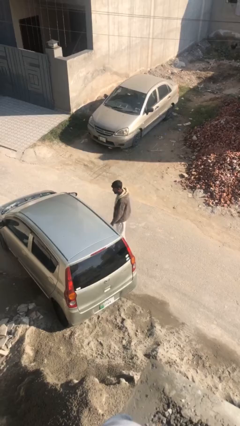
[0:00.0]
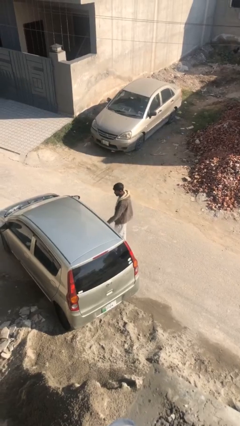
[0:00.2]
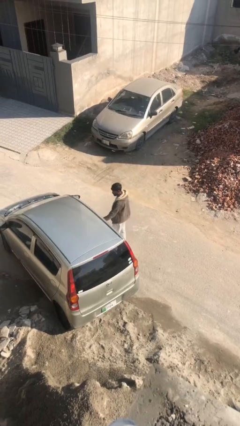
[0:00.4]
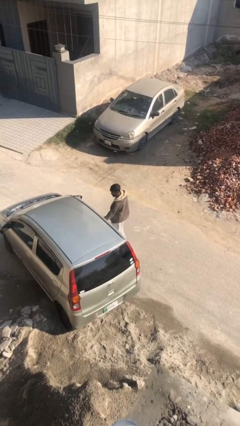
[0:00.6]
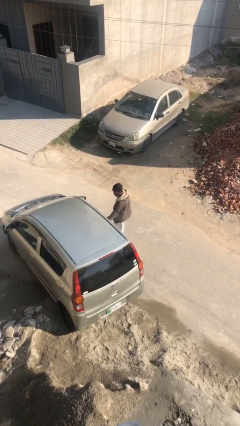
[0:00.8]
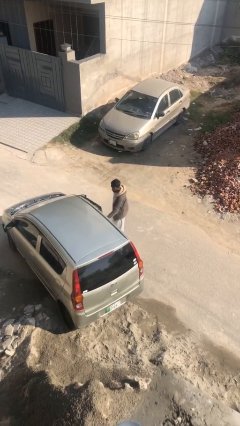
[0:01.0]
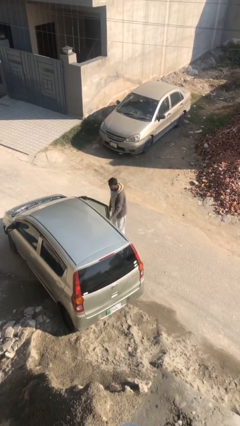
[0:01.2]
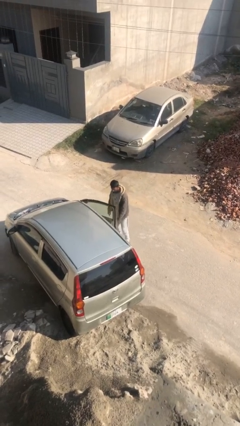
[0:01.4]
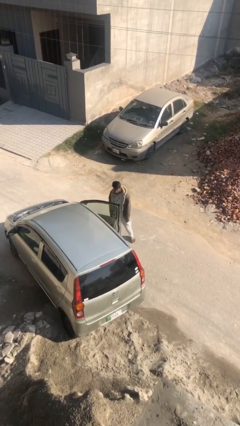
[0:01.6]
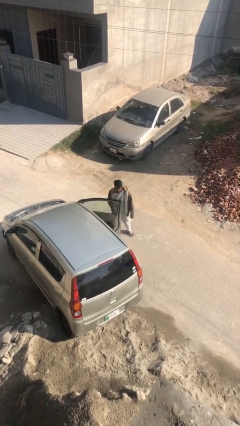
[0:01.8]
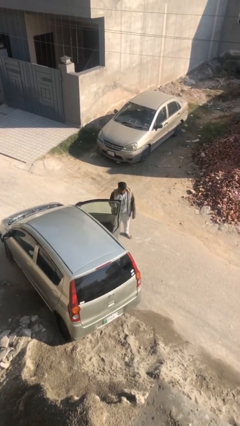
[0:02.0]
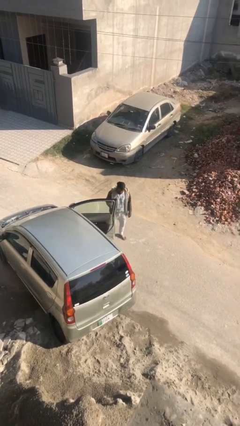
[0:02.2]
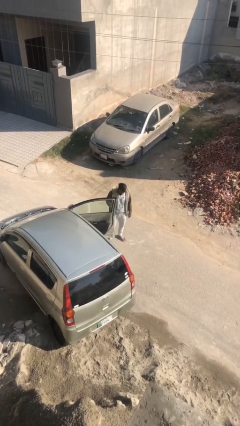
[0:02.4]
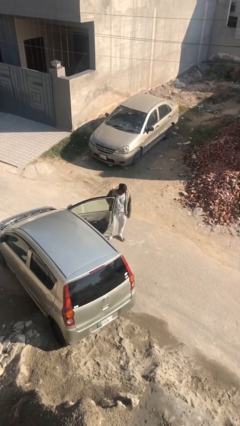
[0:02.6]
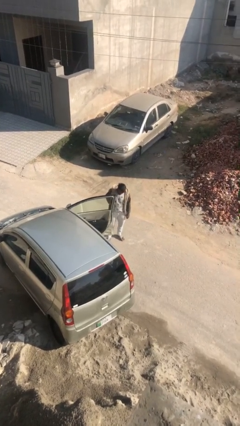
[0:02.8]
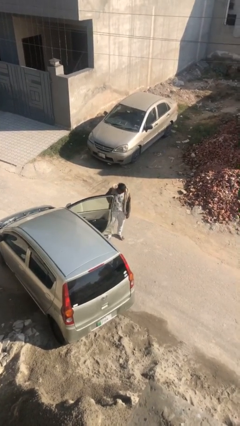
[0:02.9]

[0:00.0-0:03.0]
person opens car door

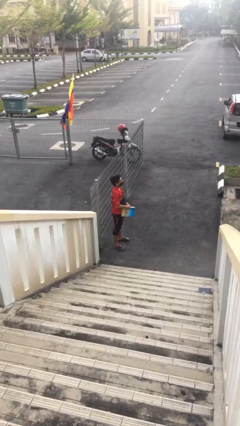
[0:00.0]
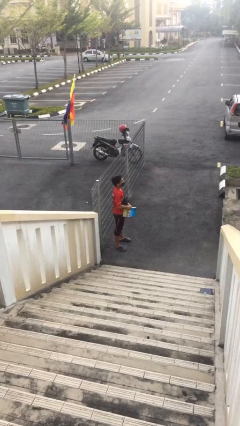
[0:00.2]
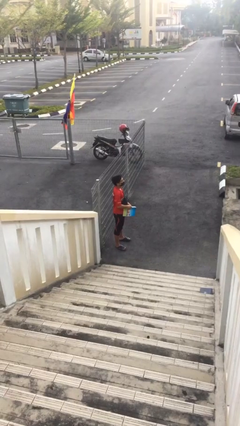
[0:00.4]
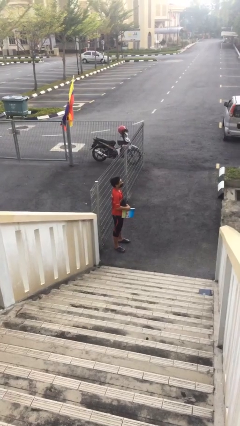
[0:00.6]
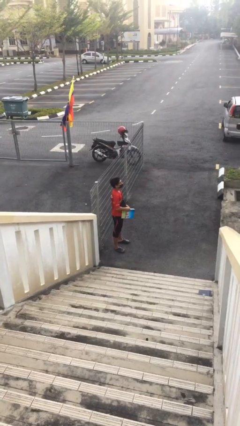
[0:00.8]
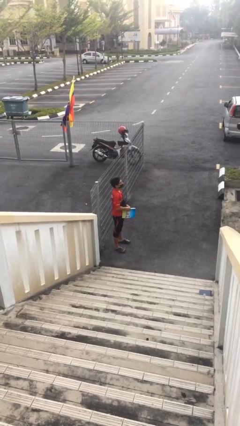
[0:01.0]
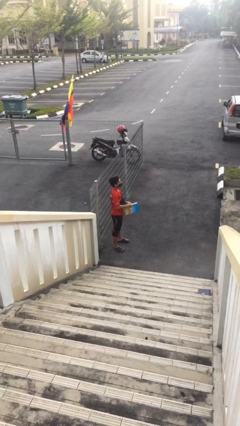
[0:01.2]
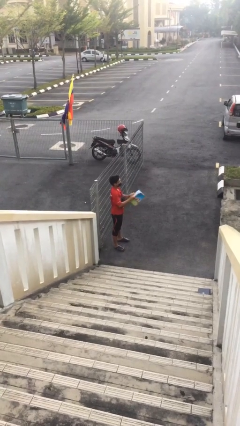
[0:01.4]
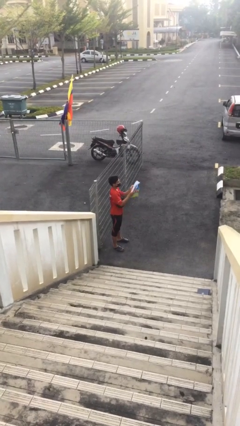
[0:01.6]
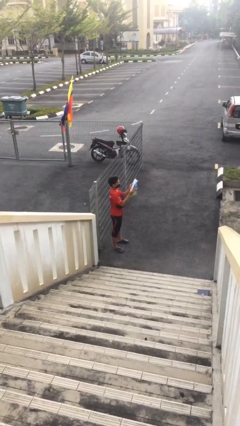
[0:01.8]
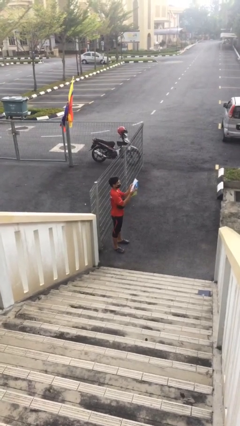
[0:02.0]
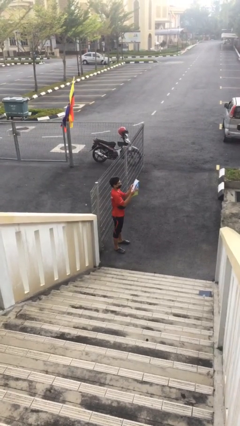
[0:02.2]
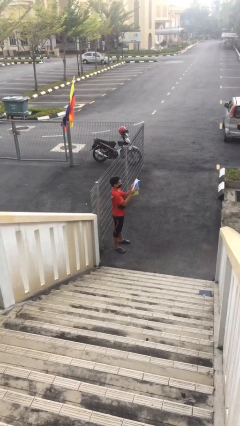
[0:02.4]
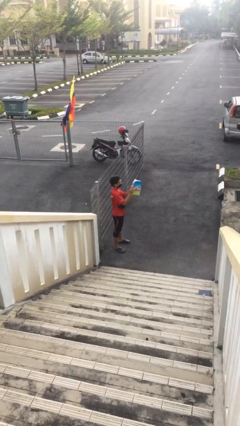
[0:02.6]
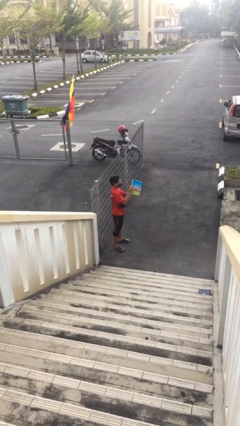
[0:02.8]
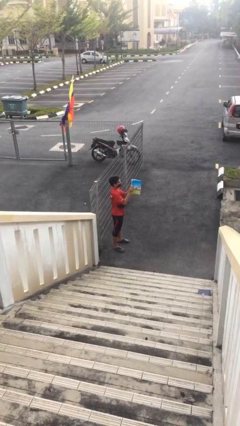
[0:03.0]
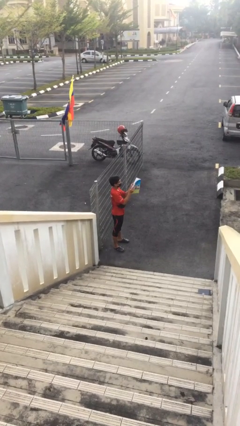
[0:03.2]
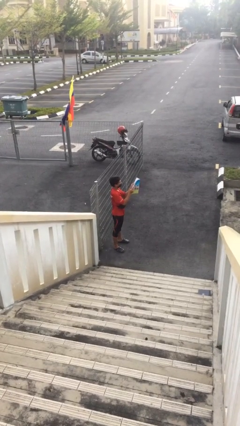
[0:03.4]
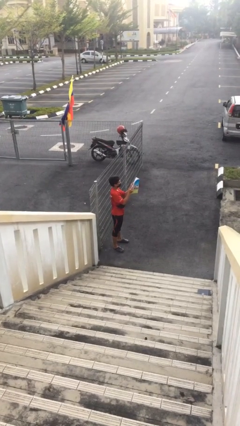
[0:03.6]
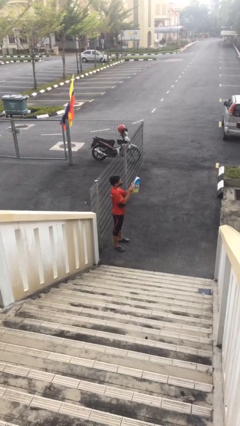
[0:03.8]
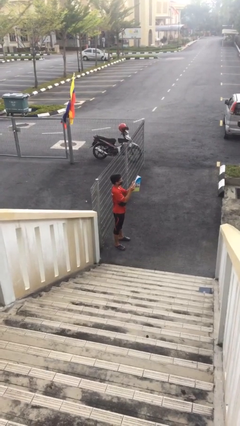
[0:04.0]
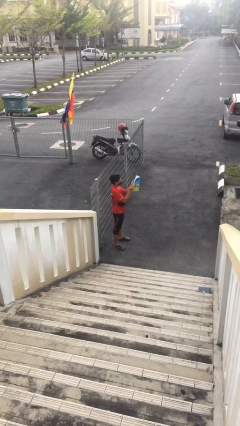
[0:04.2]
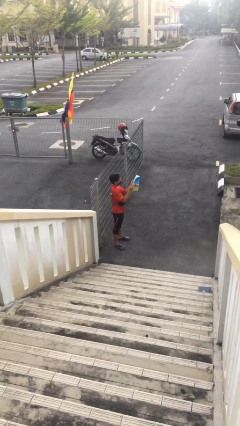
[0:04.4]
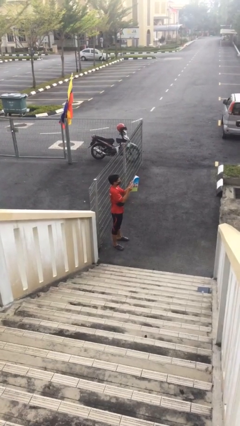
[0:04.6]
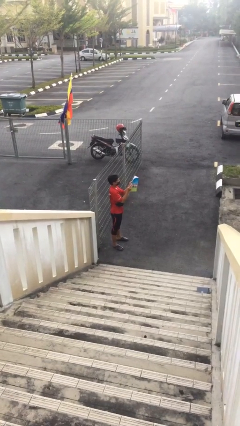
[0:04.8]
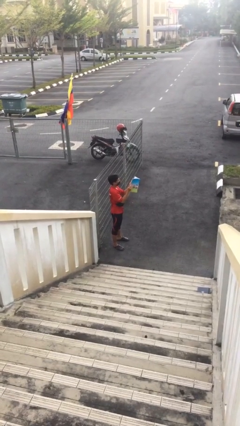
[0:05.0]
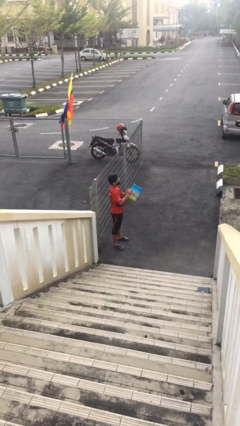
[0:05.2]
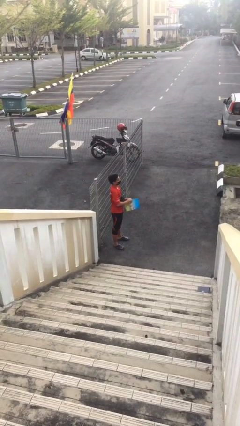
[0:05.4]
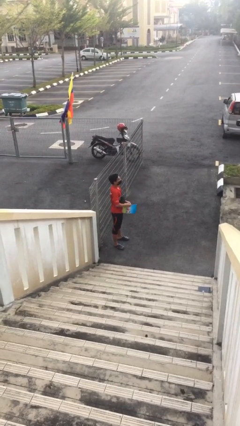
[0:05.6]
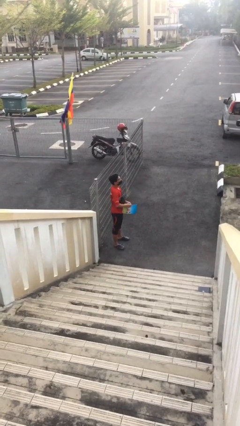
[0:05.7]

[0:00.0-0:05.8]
person reads document

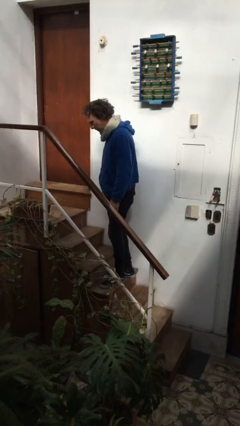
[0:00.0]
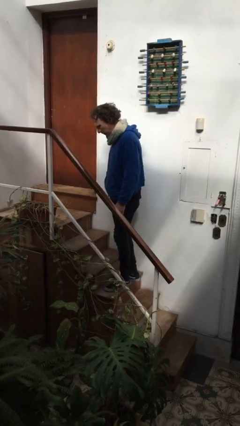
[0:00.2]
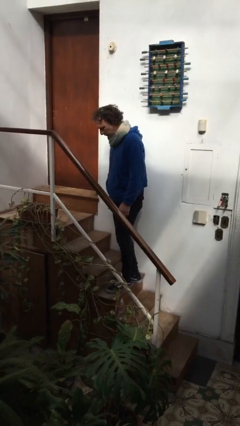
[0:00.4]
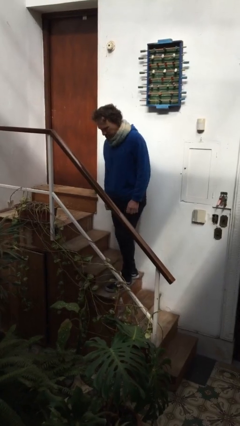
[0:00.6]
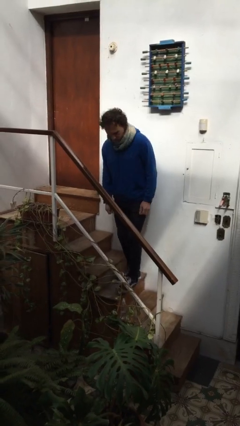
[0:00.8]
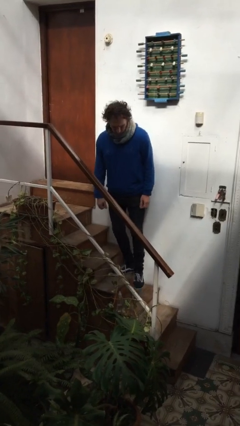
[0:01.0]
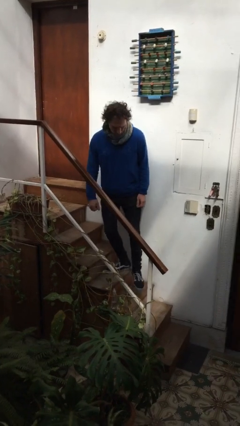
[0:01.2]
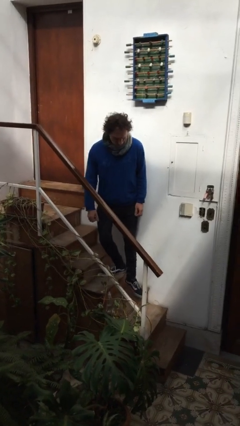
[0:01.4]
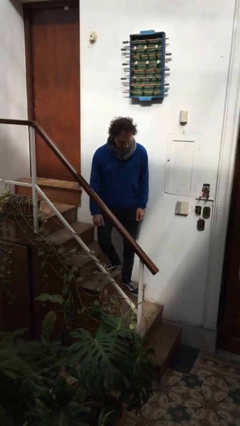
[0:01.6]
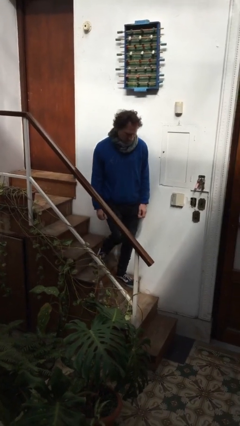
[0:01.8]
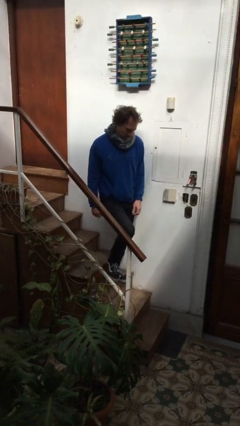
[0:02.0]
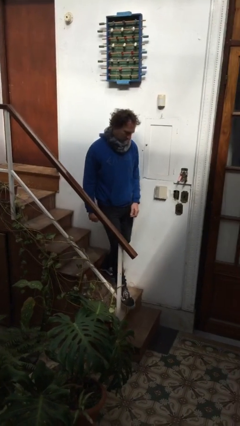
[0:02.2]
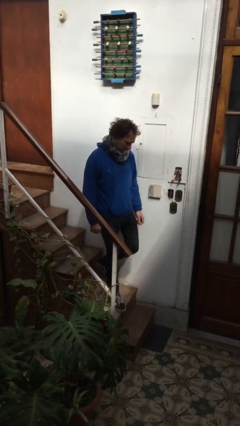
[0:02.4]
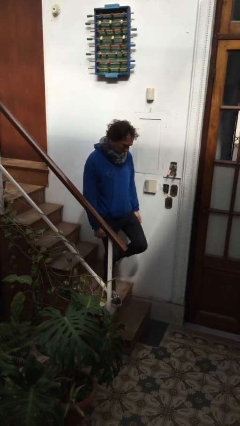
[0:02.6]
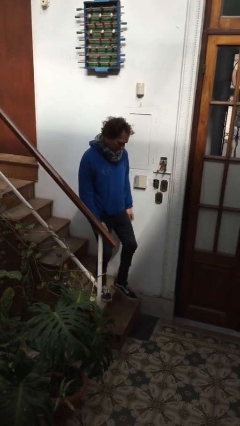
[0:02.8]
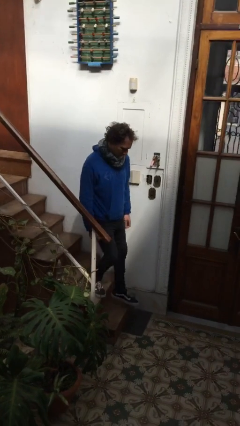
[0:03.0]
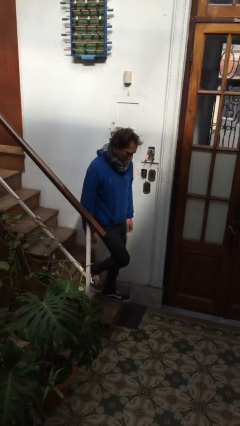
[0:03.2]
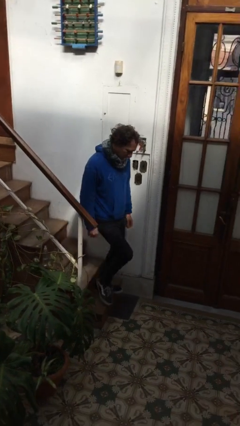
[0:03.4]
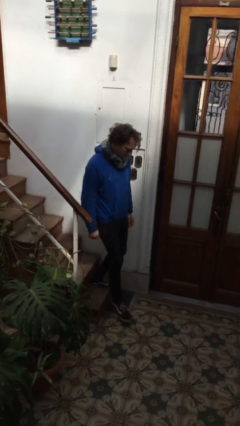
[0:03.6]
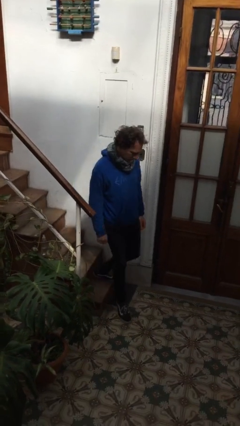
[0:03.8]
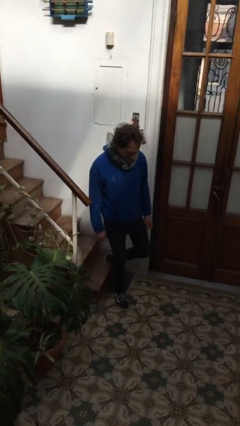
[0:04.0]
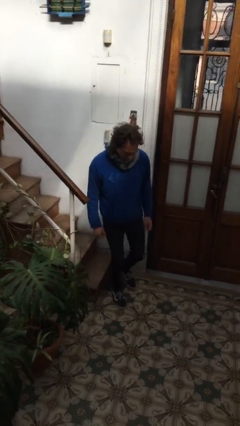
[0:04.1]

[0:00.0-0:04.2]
person climbs down stairs

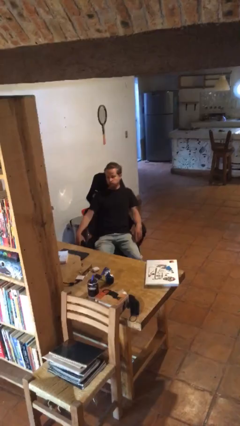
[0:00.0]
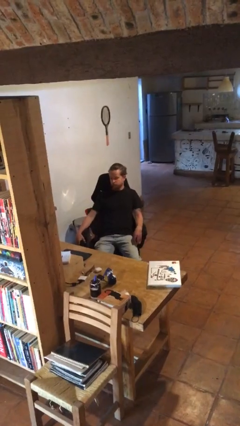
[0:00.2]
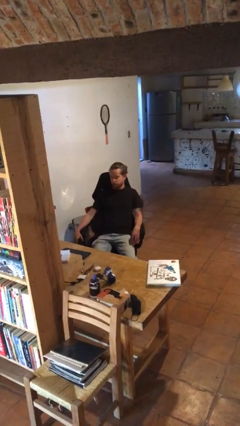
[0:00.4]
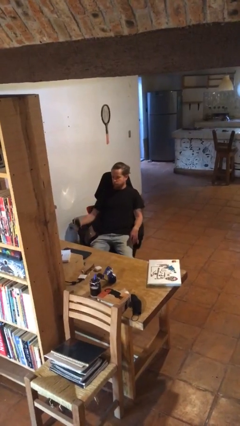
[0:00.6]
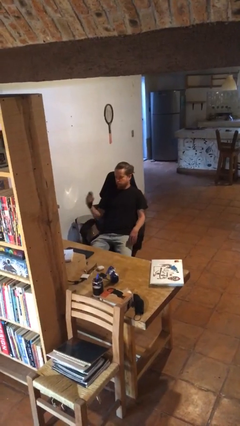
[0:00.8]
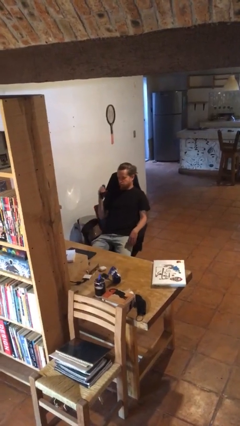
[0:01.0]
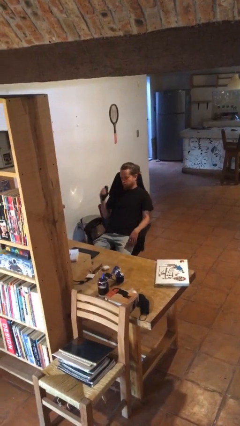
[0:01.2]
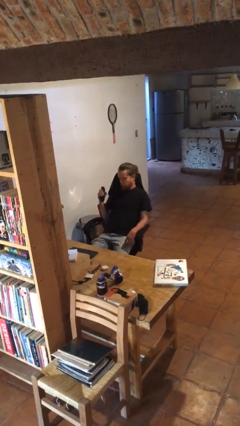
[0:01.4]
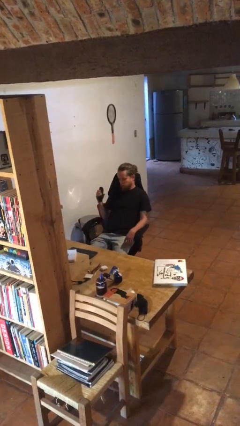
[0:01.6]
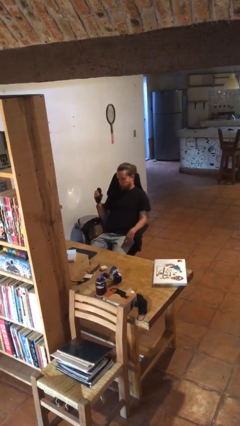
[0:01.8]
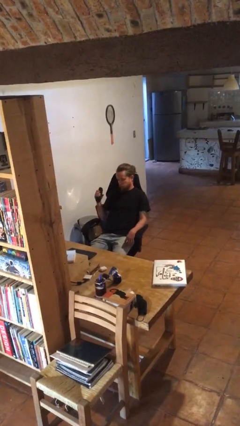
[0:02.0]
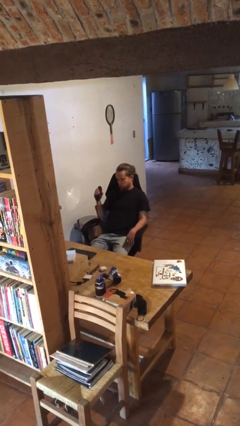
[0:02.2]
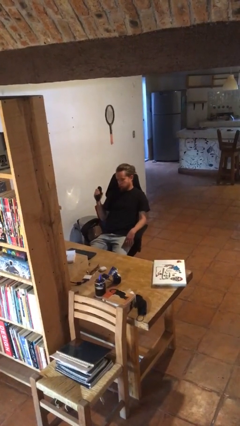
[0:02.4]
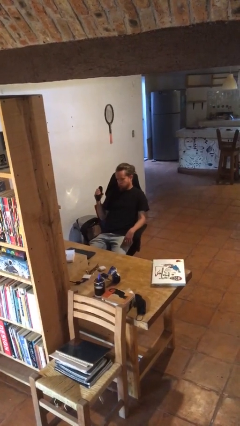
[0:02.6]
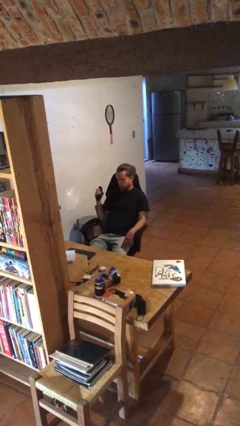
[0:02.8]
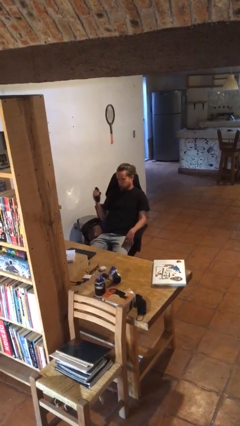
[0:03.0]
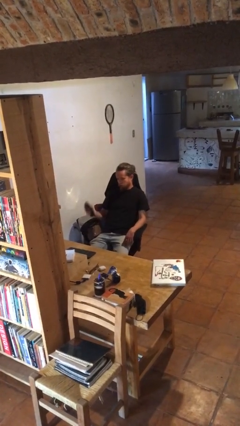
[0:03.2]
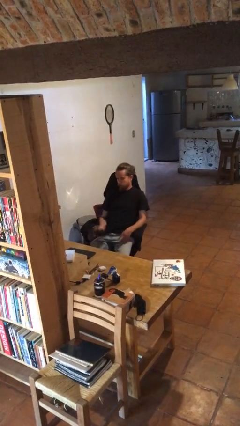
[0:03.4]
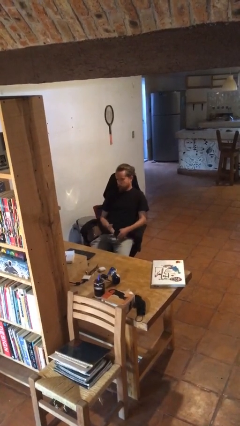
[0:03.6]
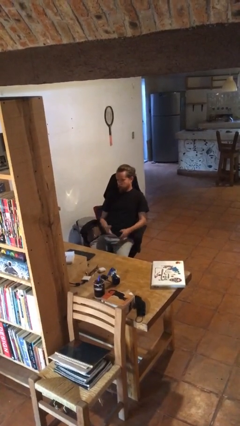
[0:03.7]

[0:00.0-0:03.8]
person squeezes object

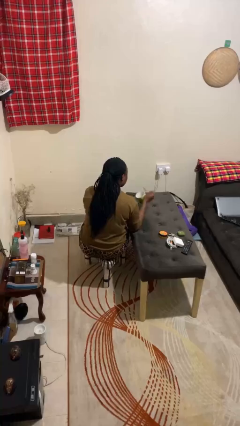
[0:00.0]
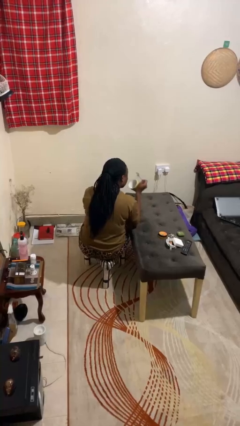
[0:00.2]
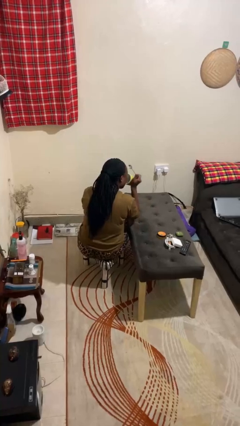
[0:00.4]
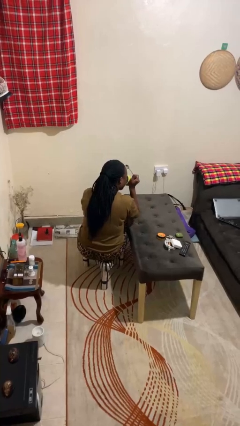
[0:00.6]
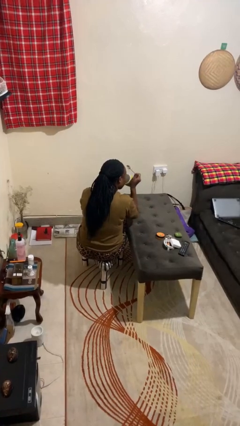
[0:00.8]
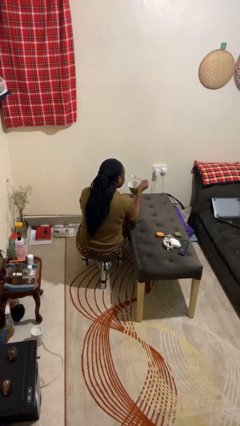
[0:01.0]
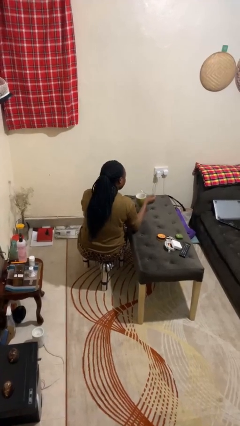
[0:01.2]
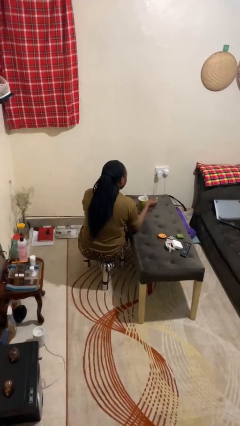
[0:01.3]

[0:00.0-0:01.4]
person drinks from mug
